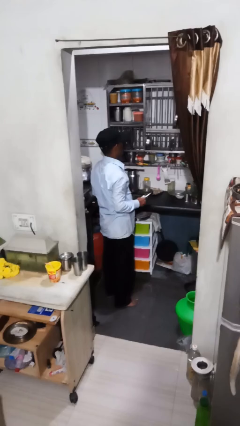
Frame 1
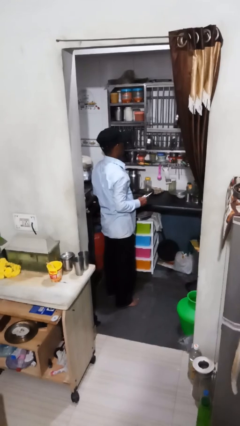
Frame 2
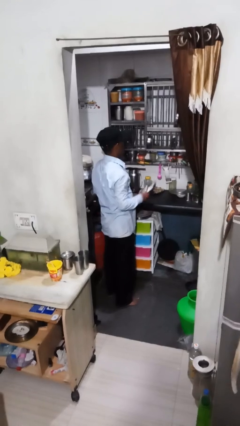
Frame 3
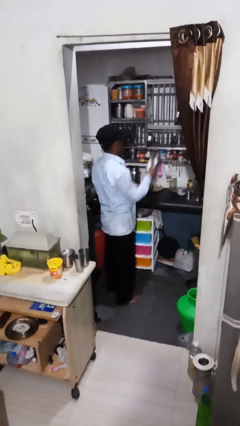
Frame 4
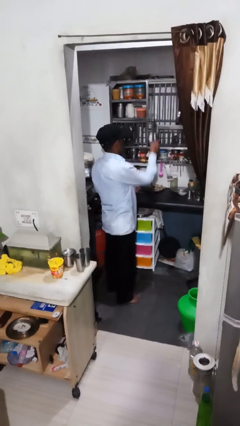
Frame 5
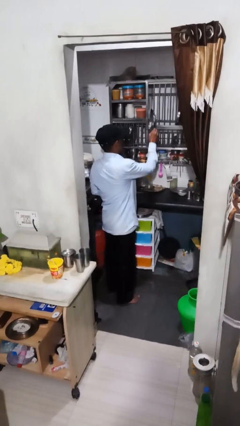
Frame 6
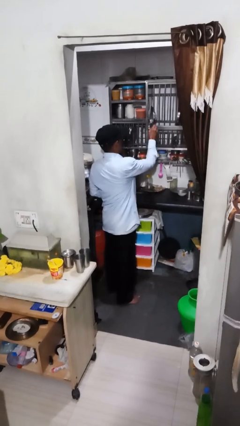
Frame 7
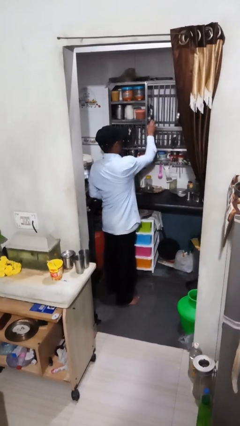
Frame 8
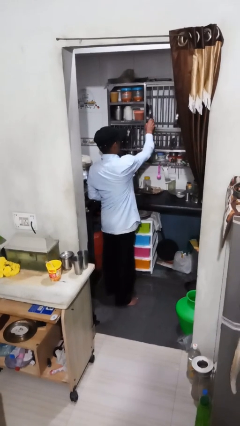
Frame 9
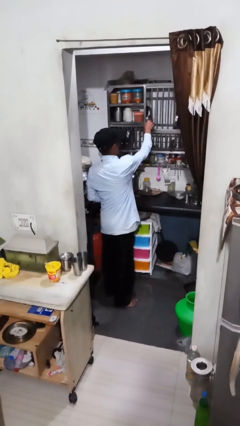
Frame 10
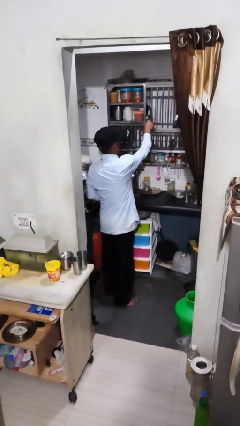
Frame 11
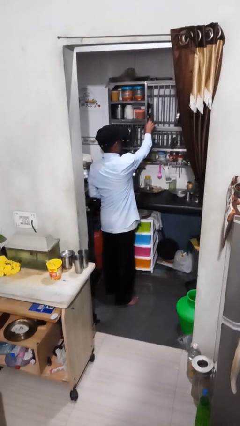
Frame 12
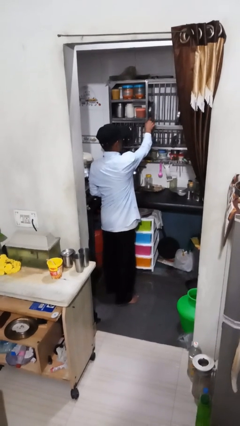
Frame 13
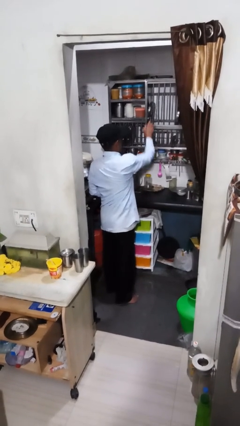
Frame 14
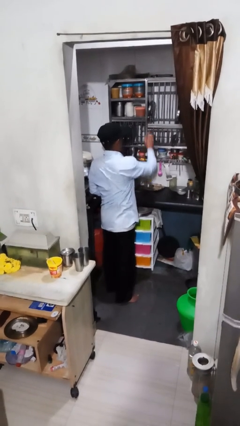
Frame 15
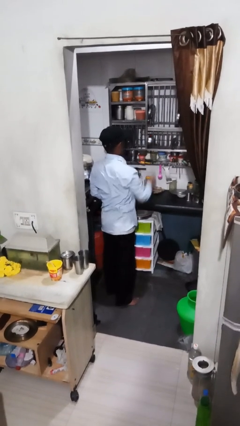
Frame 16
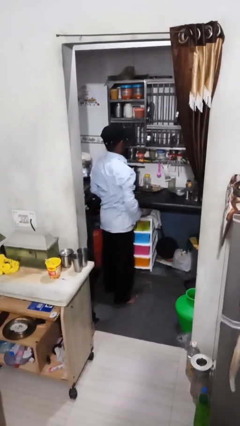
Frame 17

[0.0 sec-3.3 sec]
person puts object in cabinet

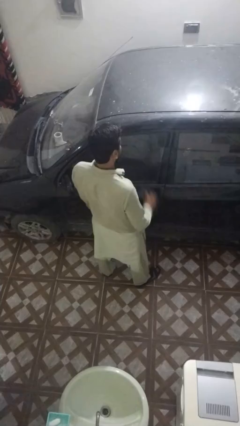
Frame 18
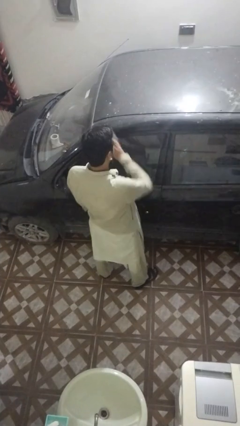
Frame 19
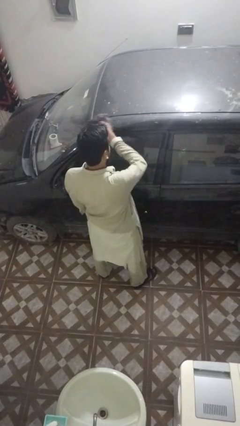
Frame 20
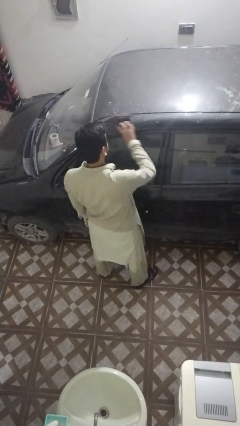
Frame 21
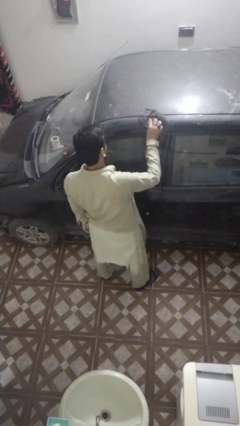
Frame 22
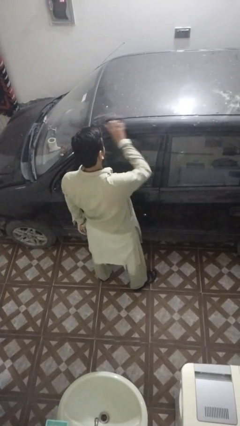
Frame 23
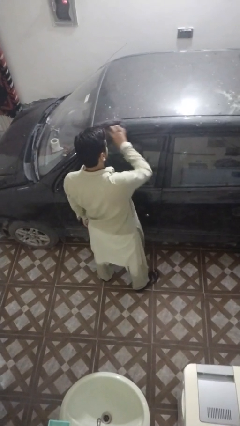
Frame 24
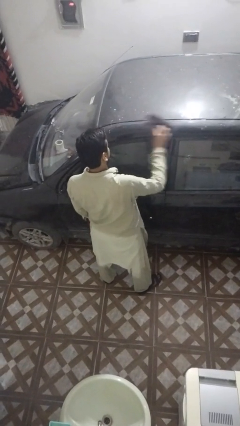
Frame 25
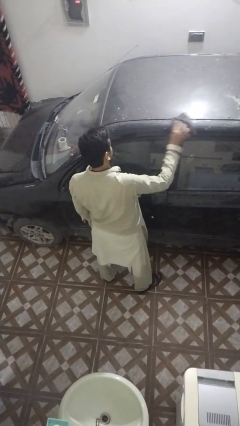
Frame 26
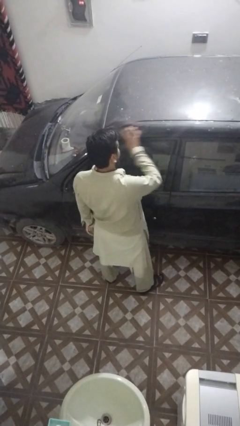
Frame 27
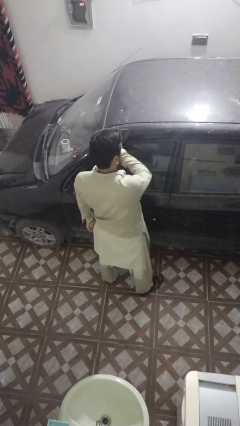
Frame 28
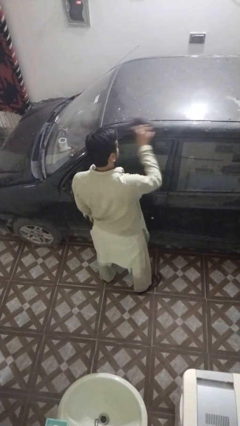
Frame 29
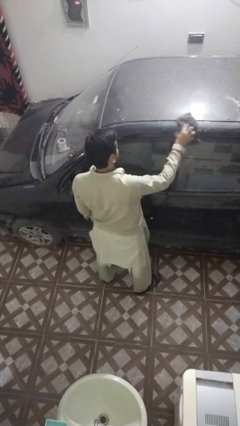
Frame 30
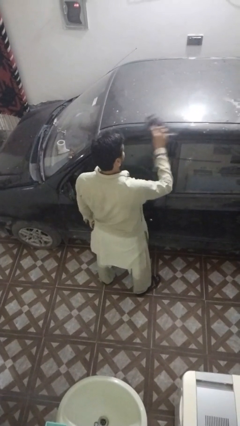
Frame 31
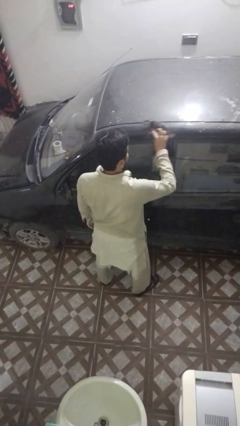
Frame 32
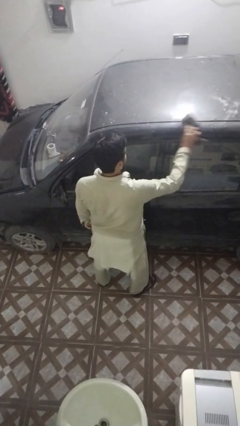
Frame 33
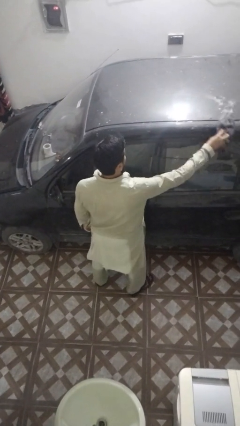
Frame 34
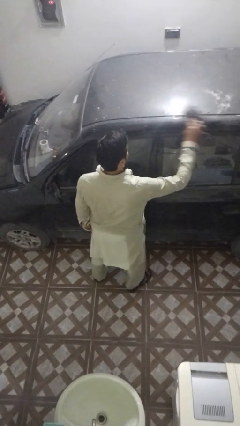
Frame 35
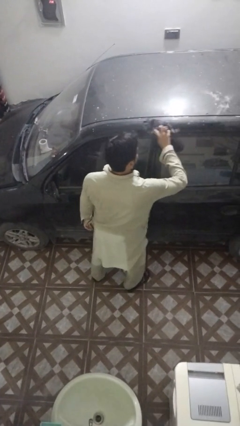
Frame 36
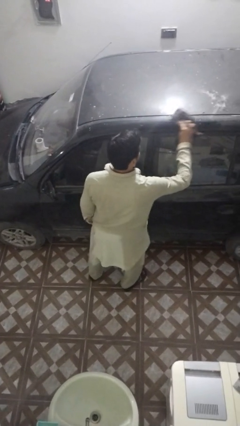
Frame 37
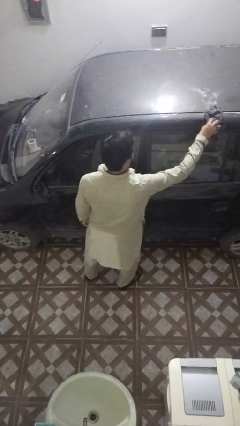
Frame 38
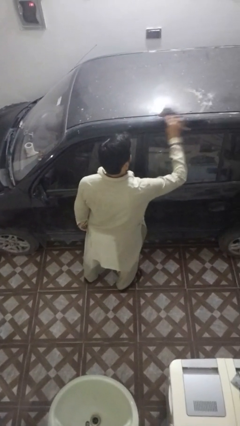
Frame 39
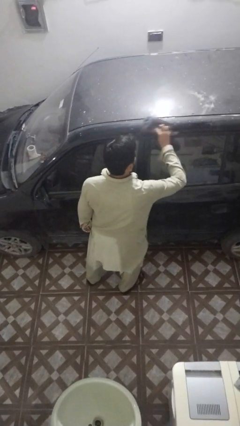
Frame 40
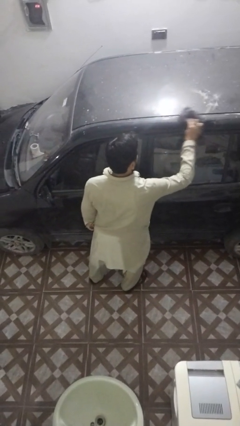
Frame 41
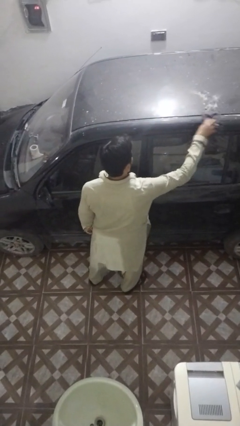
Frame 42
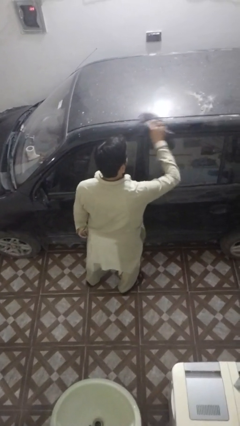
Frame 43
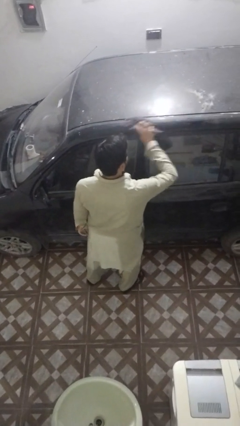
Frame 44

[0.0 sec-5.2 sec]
person polishes car with rag

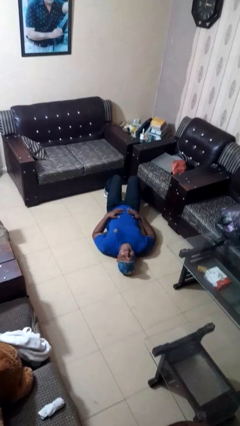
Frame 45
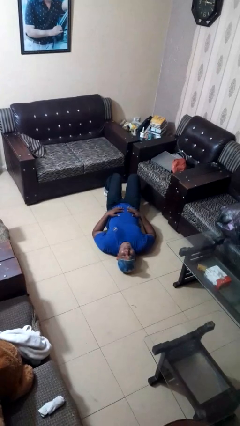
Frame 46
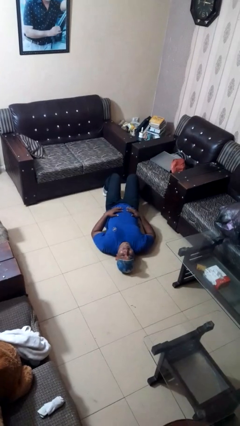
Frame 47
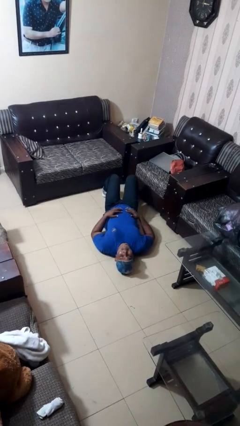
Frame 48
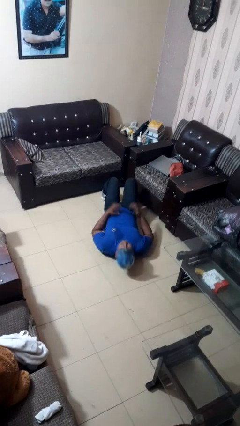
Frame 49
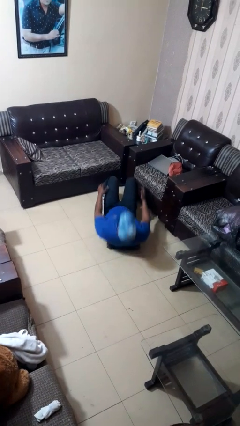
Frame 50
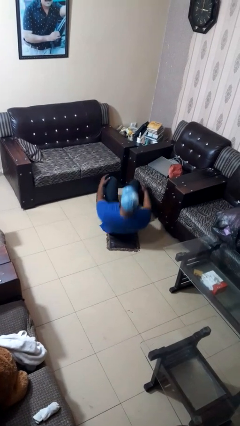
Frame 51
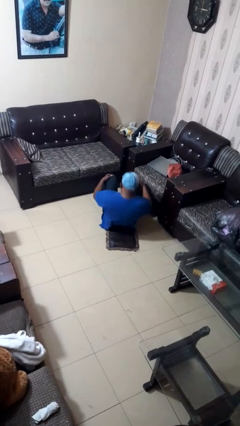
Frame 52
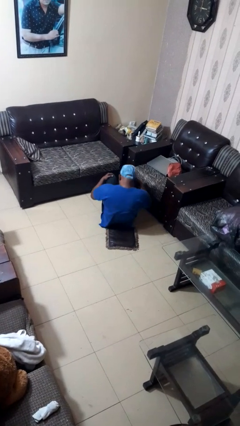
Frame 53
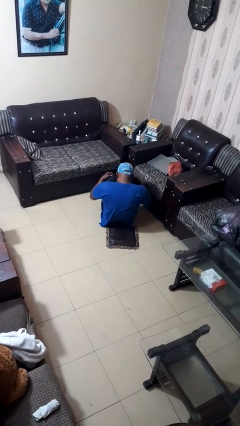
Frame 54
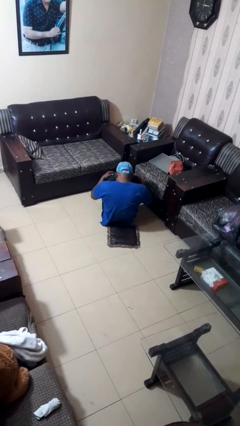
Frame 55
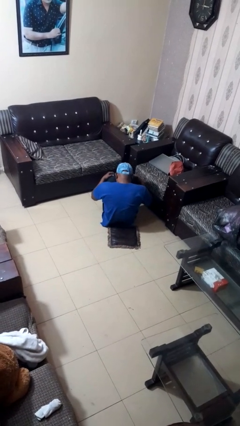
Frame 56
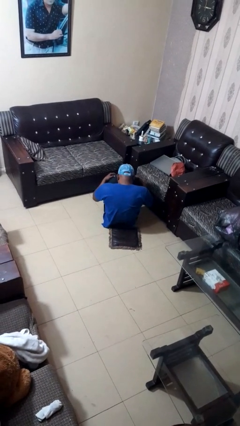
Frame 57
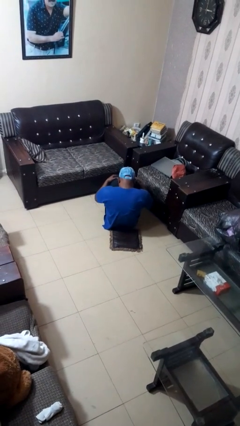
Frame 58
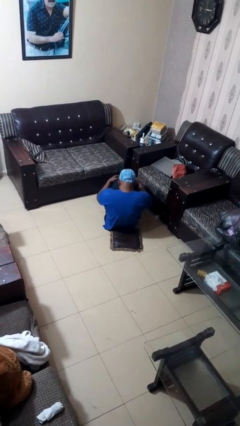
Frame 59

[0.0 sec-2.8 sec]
person exercises with situp

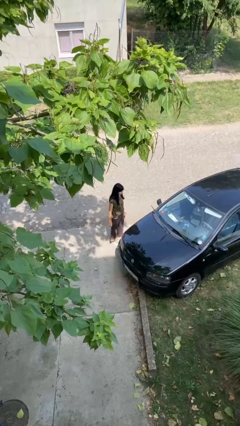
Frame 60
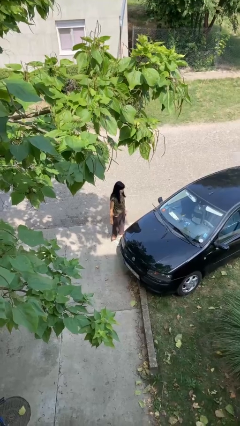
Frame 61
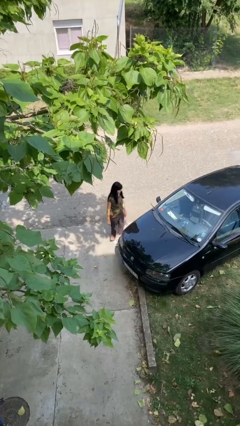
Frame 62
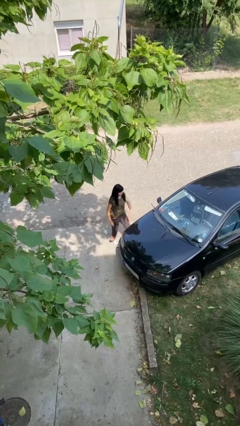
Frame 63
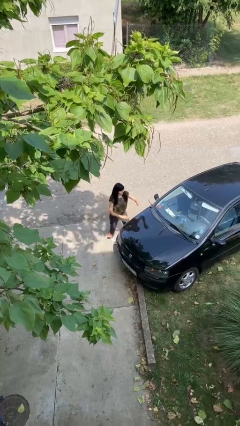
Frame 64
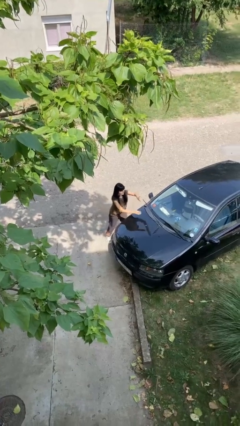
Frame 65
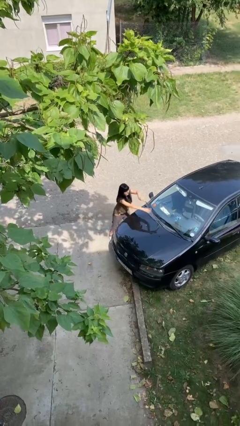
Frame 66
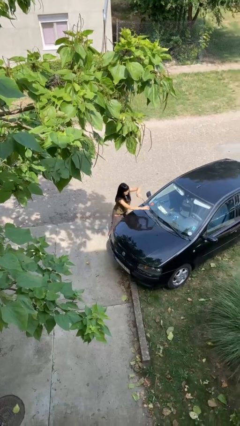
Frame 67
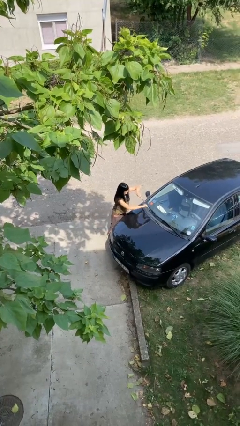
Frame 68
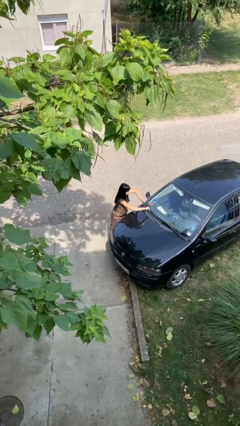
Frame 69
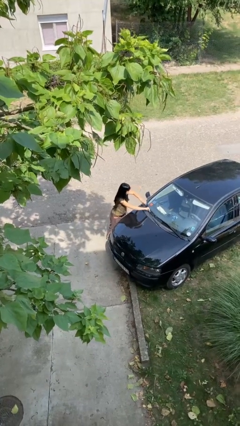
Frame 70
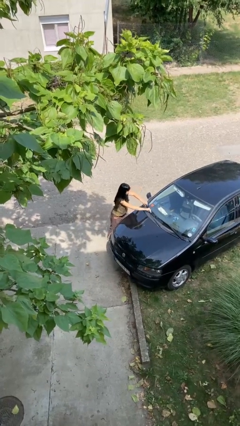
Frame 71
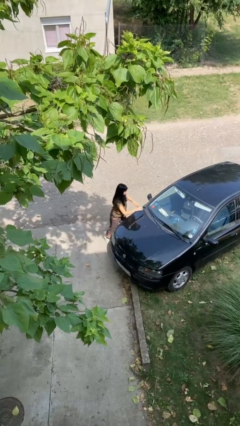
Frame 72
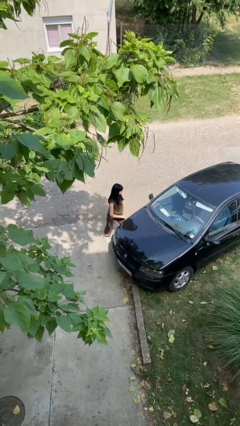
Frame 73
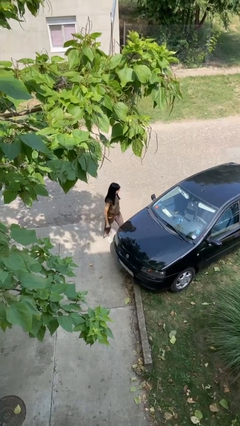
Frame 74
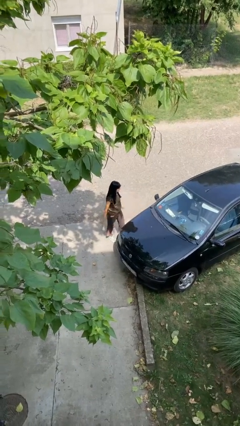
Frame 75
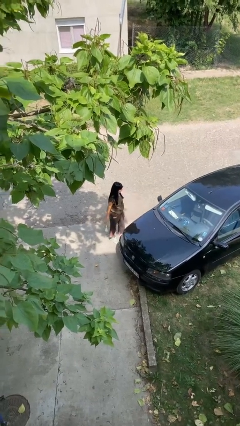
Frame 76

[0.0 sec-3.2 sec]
person flips down car wipers

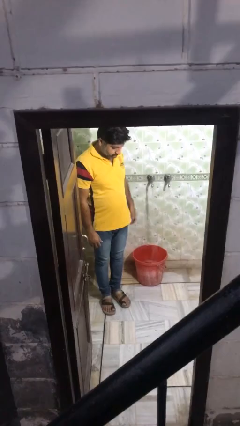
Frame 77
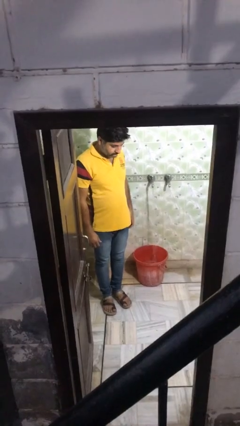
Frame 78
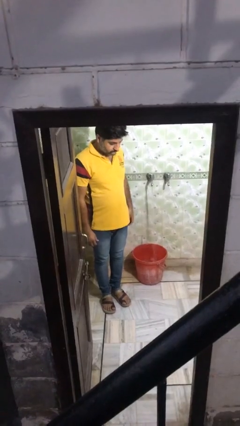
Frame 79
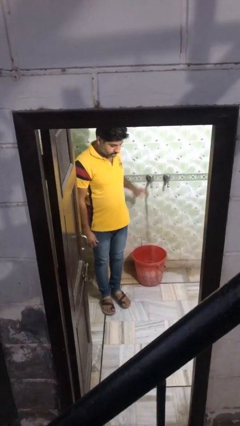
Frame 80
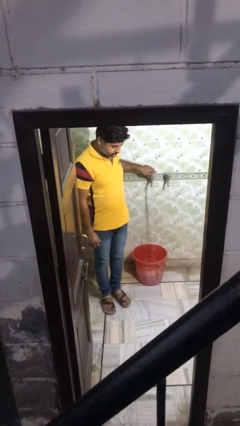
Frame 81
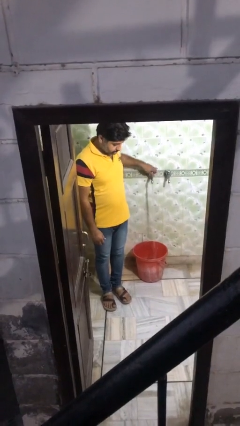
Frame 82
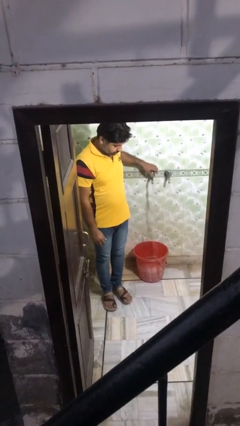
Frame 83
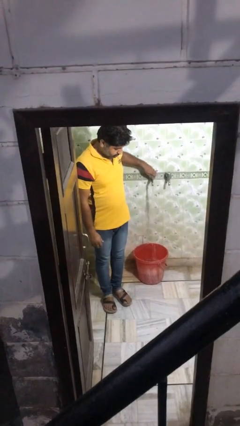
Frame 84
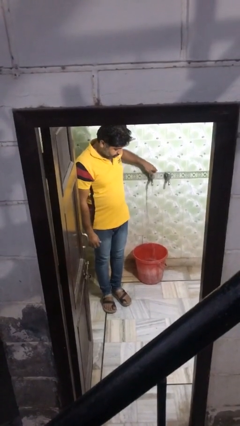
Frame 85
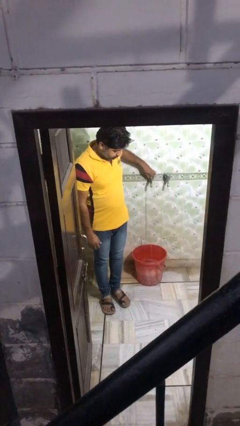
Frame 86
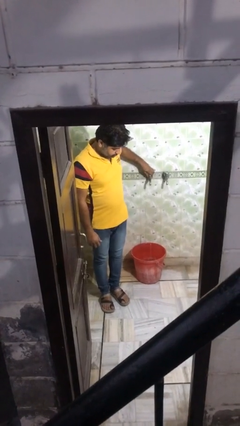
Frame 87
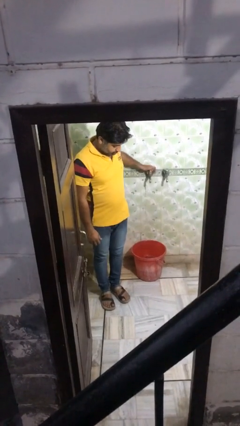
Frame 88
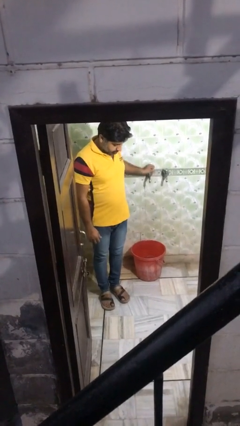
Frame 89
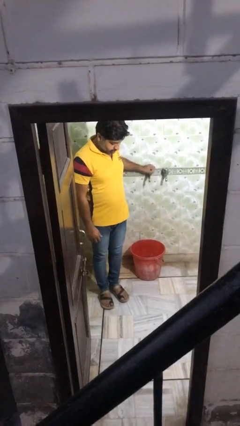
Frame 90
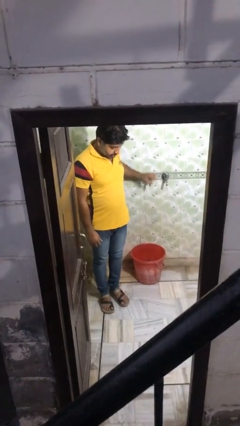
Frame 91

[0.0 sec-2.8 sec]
person turns off faucet
